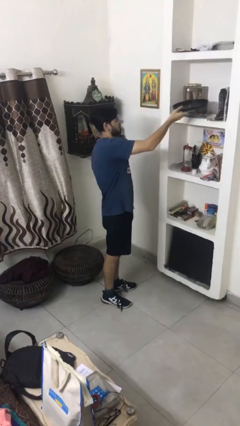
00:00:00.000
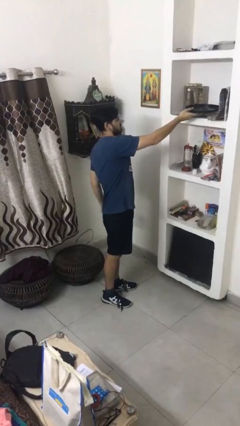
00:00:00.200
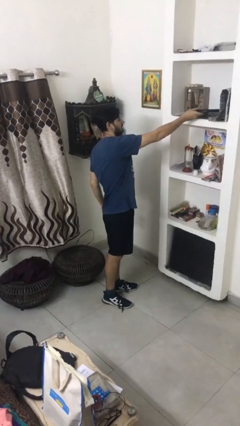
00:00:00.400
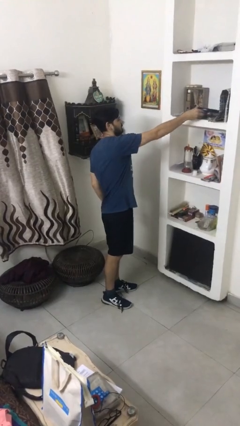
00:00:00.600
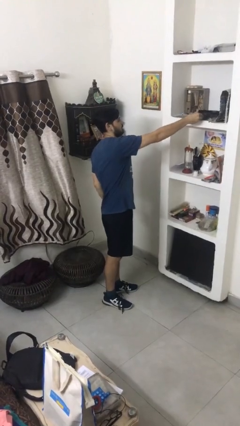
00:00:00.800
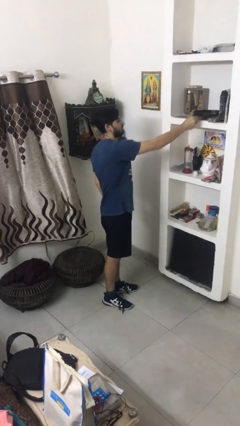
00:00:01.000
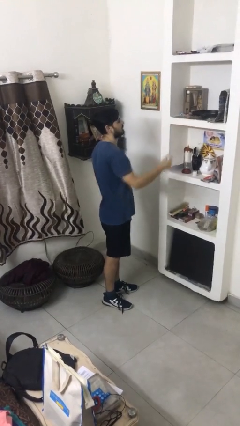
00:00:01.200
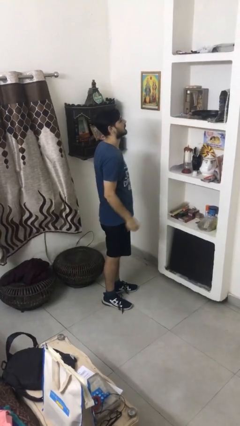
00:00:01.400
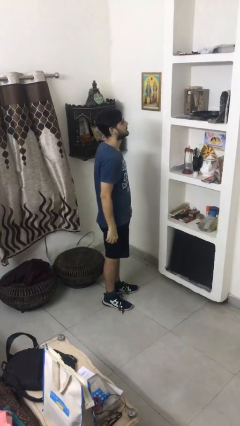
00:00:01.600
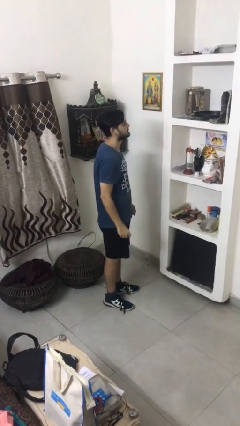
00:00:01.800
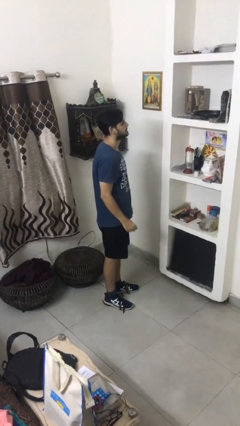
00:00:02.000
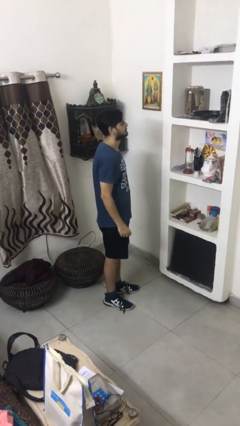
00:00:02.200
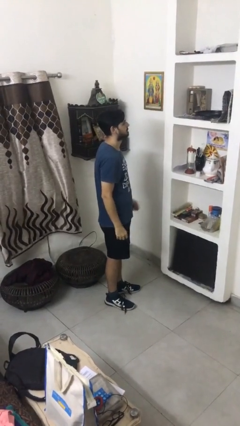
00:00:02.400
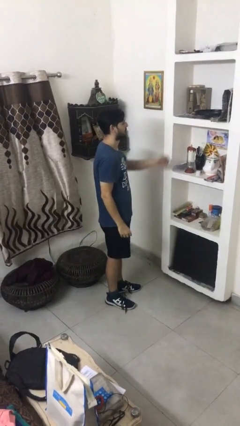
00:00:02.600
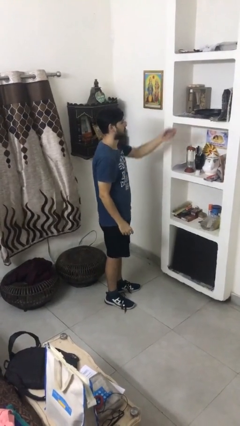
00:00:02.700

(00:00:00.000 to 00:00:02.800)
person puts down object on shelf

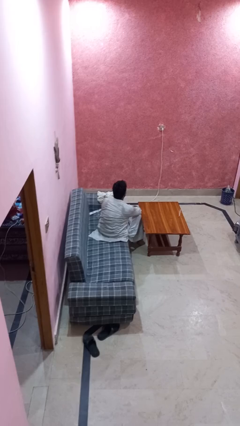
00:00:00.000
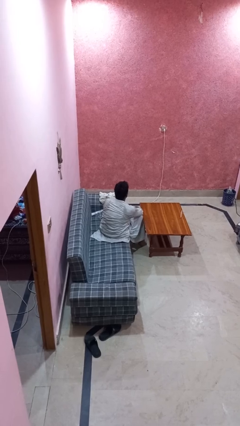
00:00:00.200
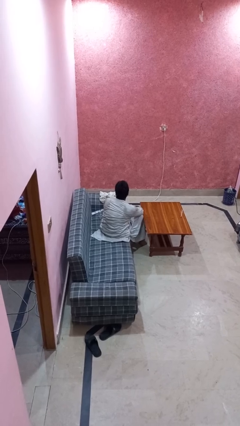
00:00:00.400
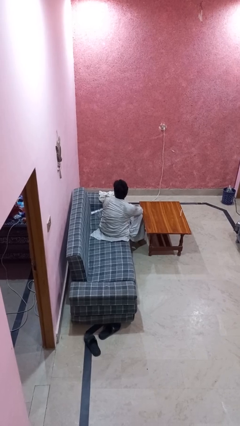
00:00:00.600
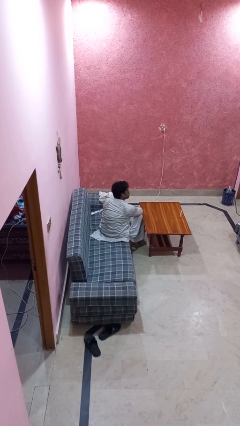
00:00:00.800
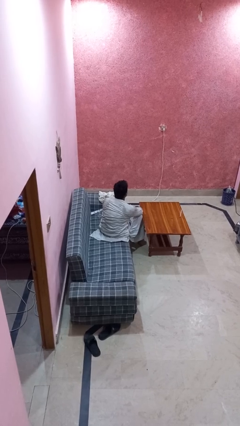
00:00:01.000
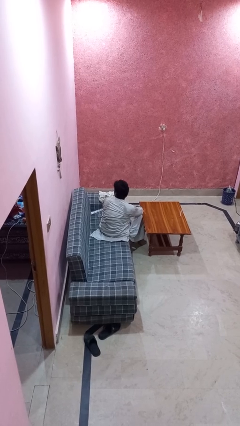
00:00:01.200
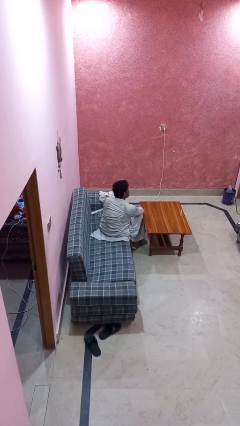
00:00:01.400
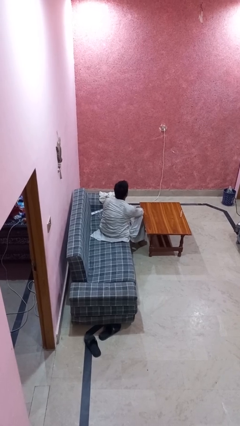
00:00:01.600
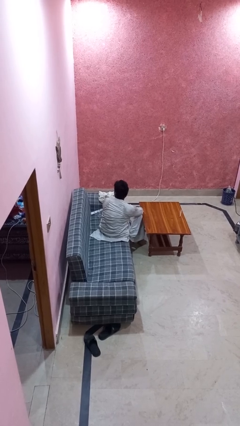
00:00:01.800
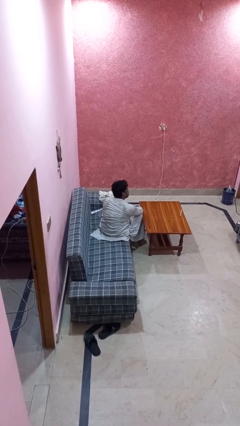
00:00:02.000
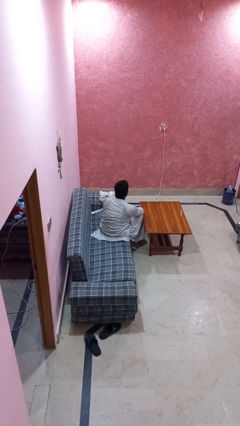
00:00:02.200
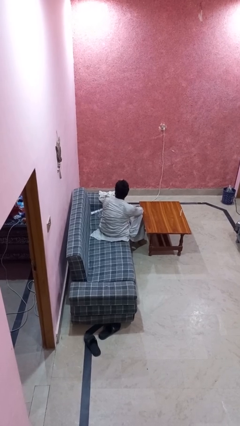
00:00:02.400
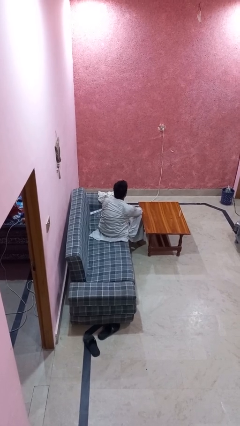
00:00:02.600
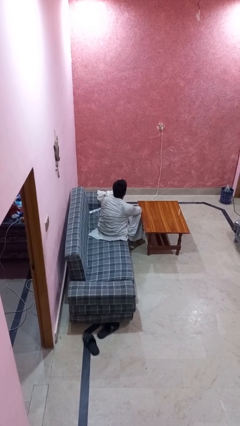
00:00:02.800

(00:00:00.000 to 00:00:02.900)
person shakes head

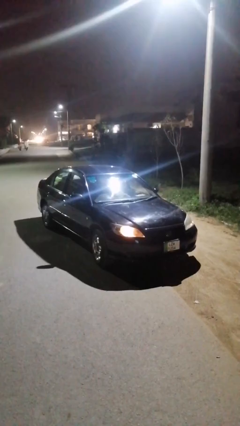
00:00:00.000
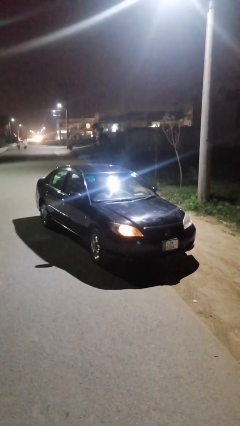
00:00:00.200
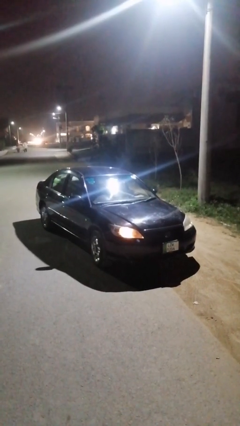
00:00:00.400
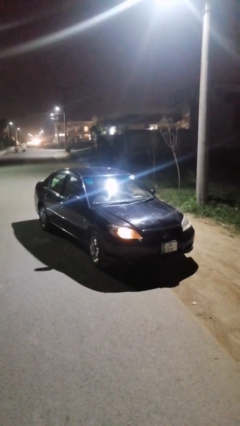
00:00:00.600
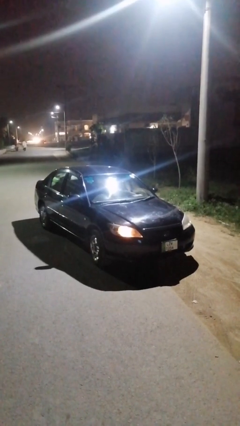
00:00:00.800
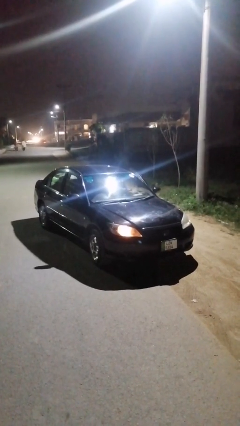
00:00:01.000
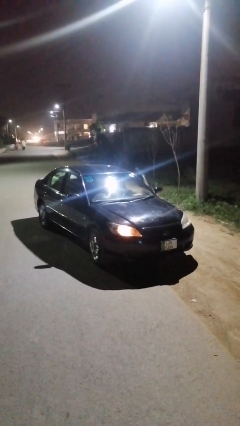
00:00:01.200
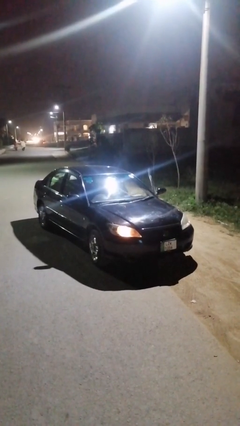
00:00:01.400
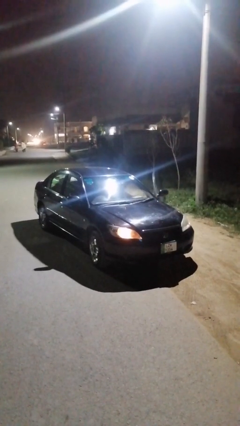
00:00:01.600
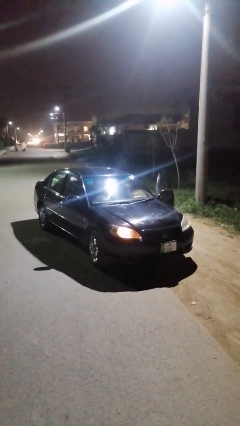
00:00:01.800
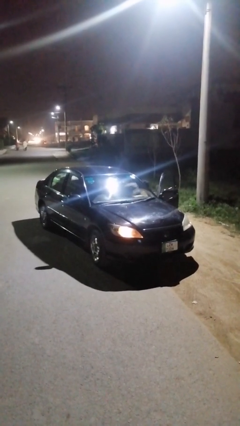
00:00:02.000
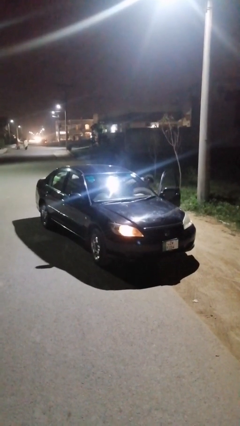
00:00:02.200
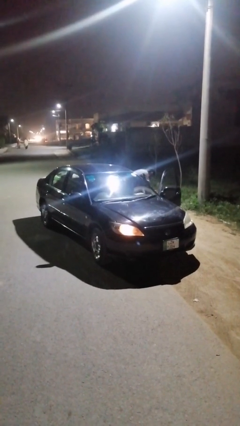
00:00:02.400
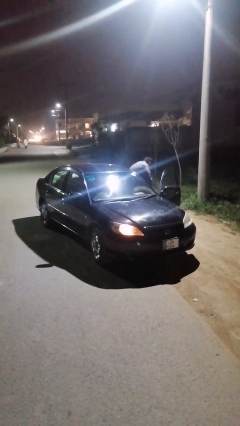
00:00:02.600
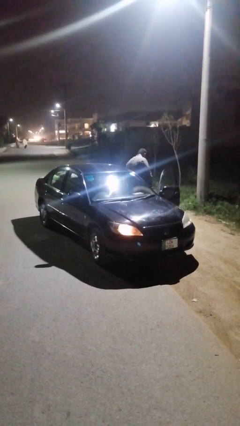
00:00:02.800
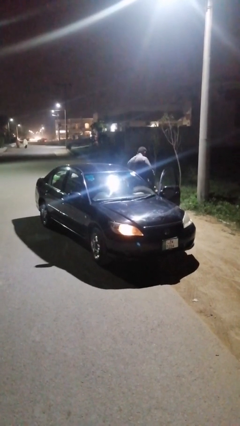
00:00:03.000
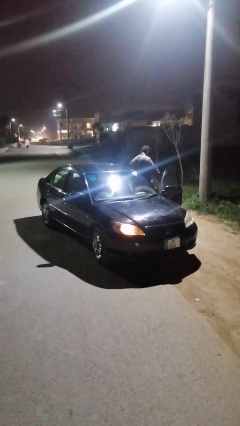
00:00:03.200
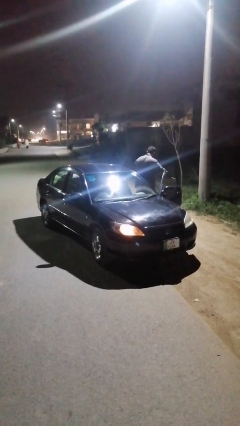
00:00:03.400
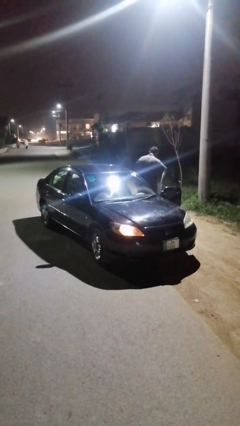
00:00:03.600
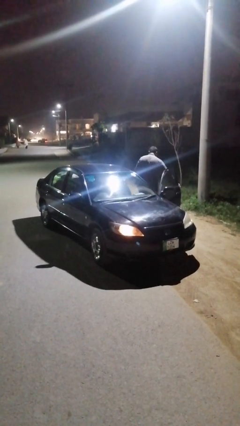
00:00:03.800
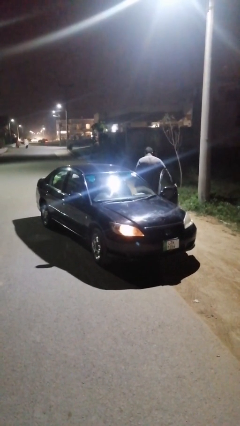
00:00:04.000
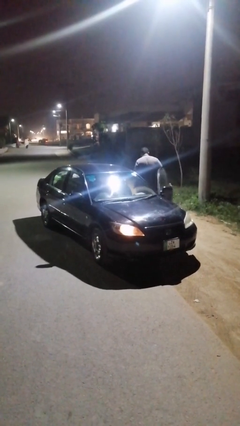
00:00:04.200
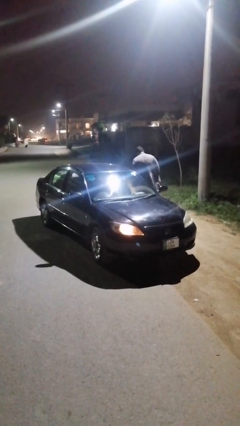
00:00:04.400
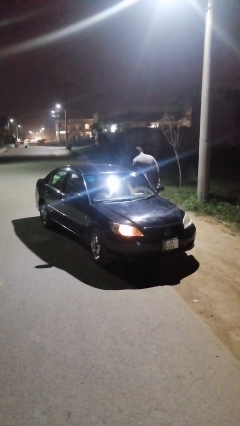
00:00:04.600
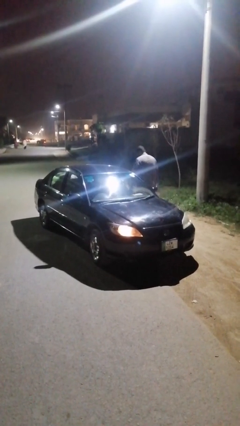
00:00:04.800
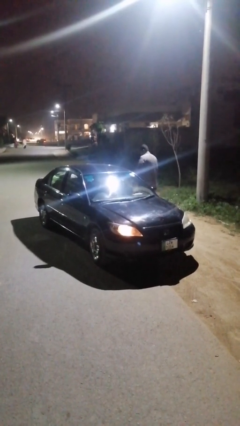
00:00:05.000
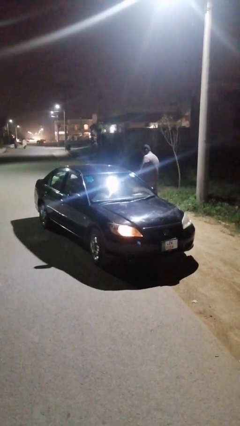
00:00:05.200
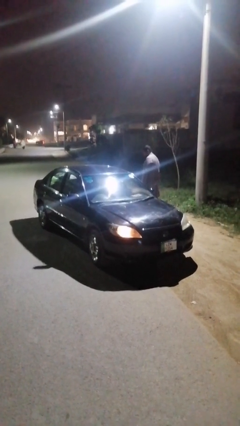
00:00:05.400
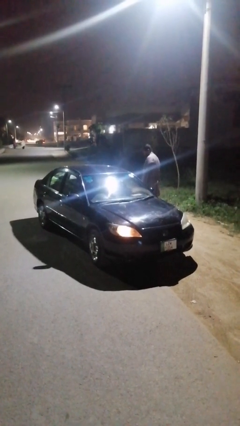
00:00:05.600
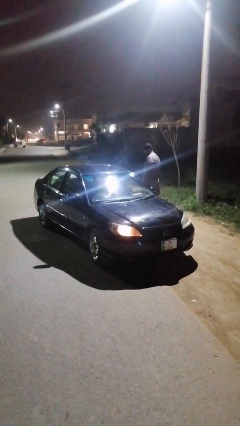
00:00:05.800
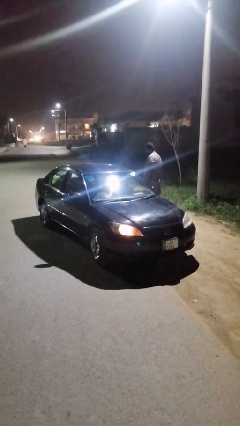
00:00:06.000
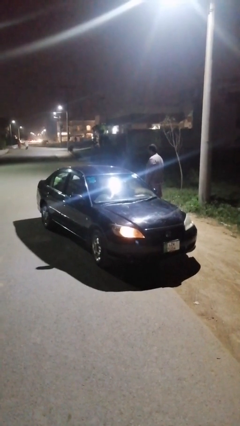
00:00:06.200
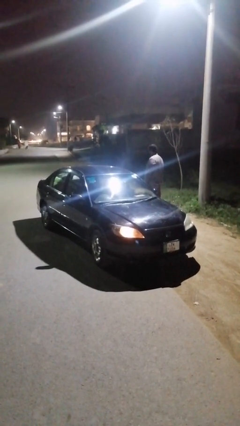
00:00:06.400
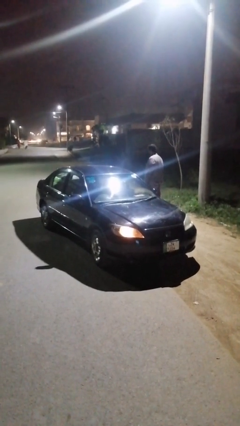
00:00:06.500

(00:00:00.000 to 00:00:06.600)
car drops off person

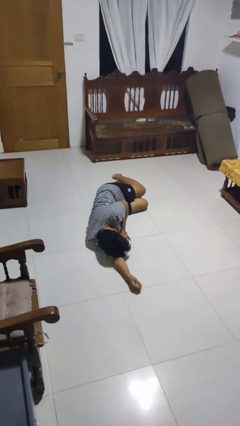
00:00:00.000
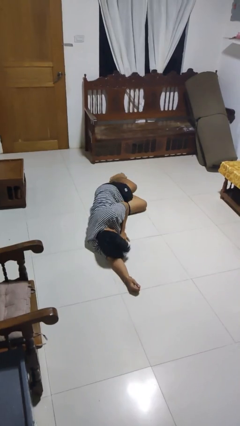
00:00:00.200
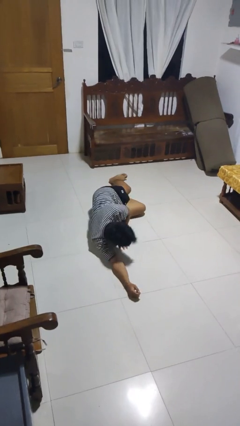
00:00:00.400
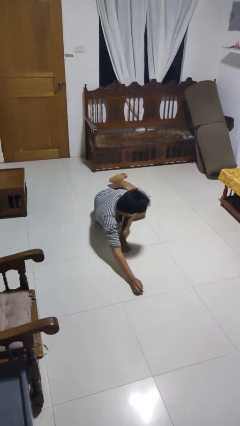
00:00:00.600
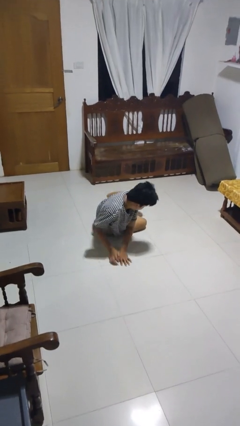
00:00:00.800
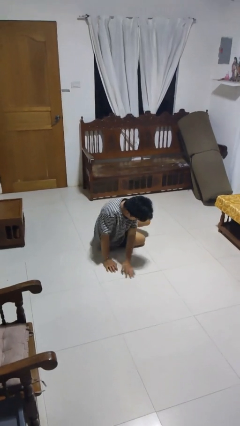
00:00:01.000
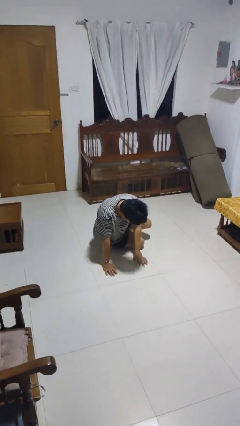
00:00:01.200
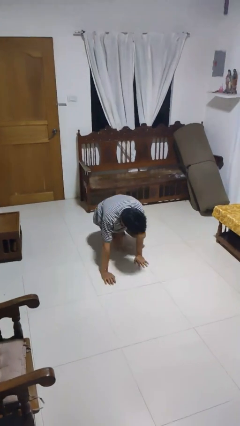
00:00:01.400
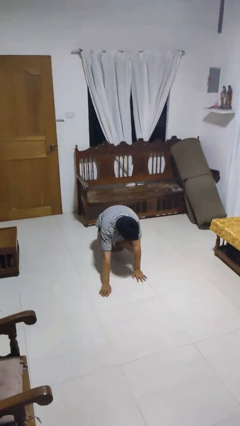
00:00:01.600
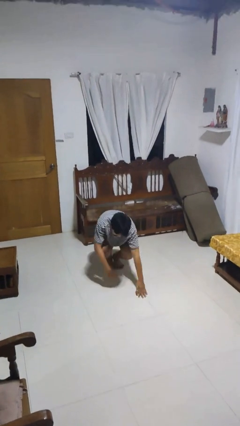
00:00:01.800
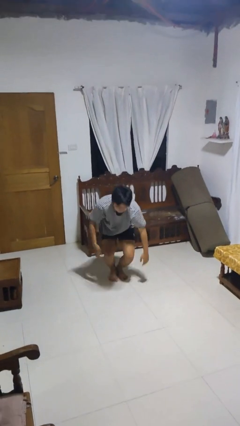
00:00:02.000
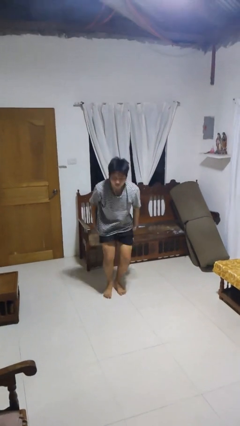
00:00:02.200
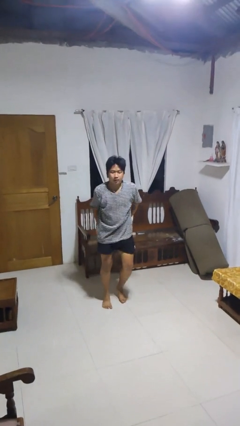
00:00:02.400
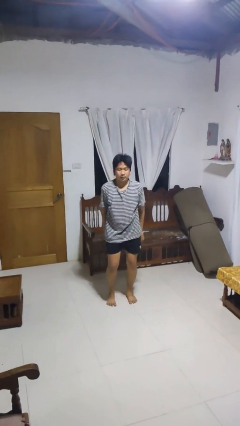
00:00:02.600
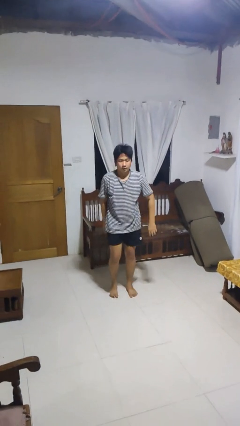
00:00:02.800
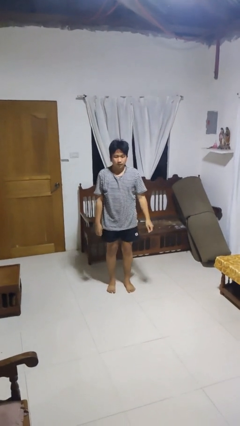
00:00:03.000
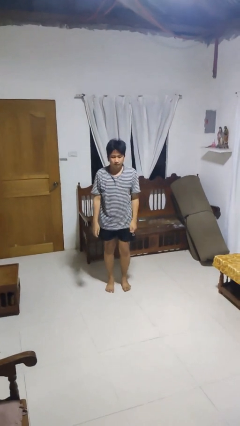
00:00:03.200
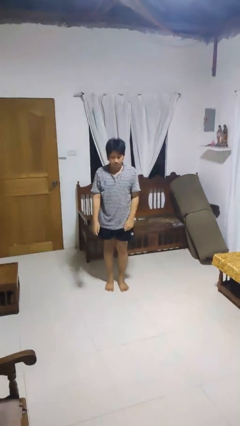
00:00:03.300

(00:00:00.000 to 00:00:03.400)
person stands up from floor

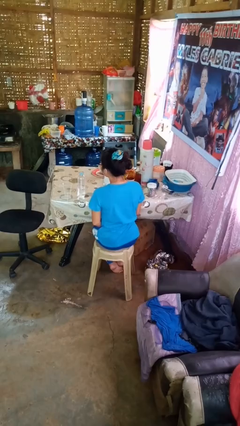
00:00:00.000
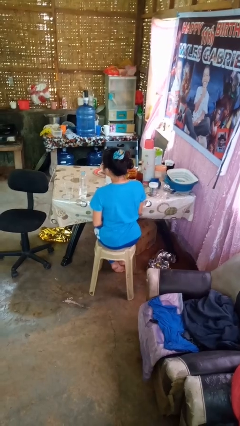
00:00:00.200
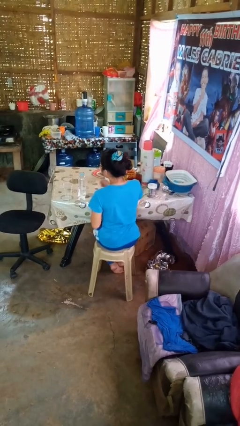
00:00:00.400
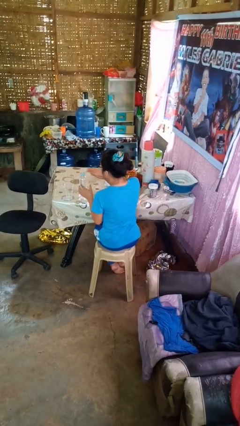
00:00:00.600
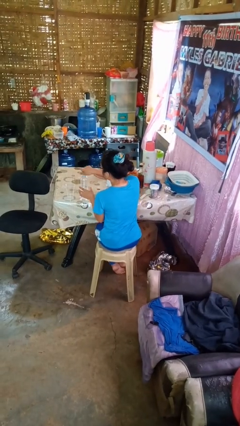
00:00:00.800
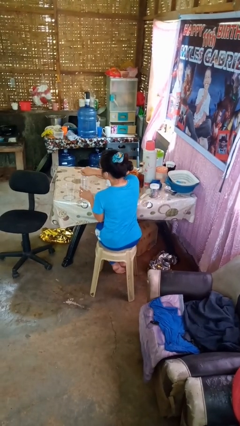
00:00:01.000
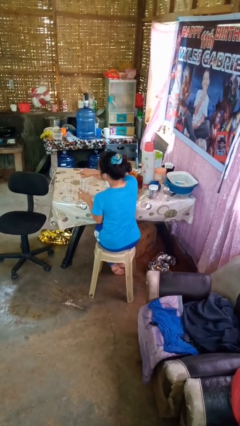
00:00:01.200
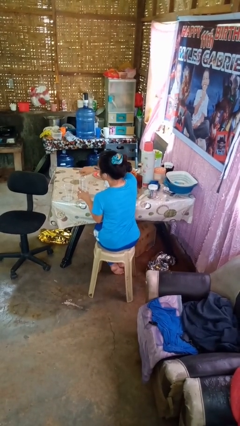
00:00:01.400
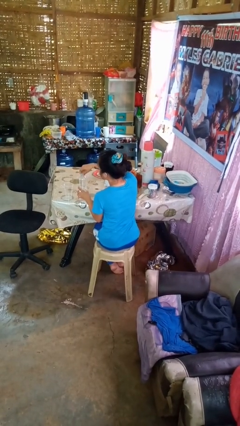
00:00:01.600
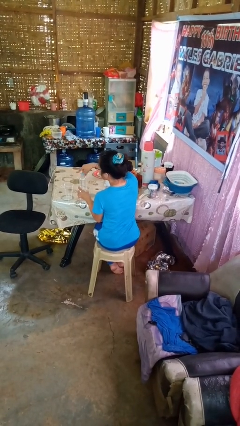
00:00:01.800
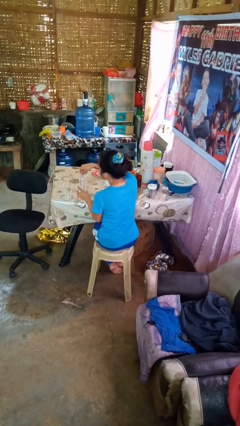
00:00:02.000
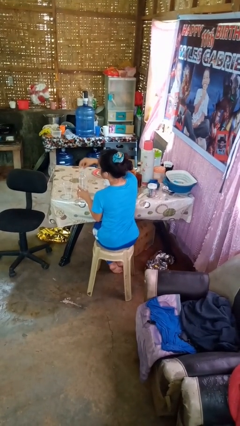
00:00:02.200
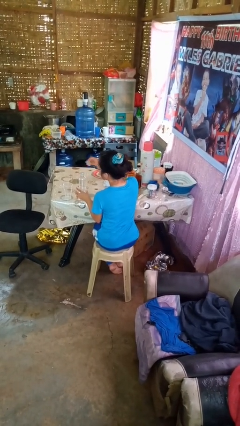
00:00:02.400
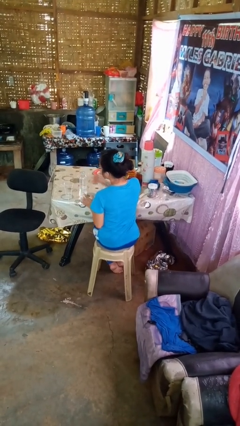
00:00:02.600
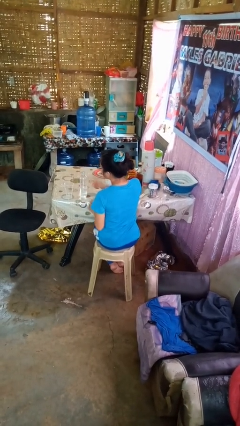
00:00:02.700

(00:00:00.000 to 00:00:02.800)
person unscrews lid from bottle
